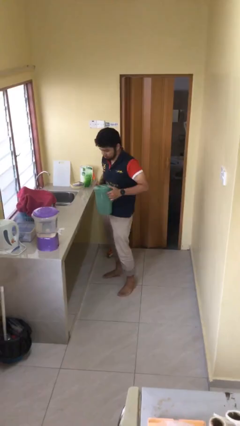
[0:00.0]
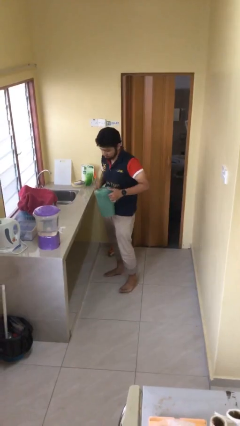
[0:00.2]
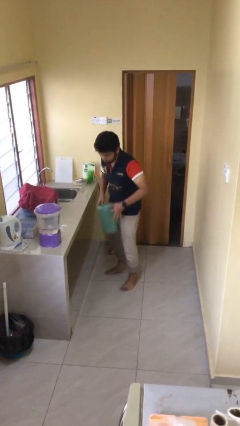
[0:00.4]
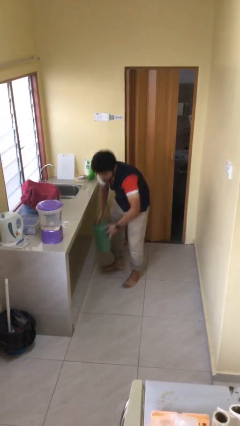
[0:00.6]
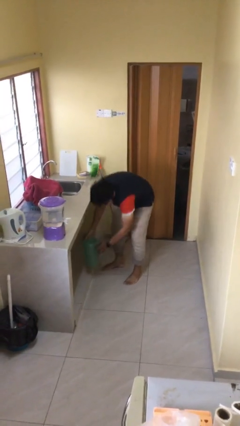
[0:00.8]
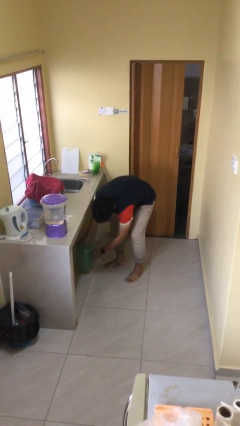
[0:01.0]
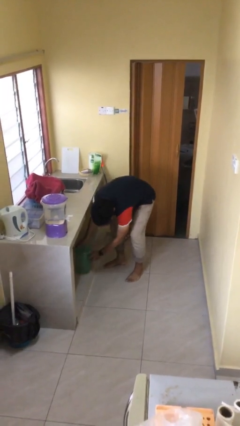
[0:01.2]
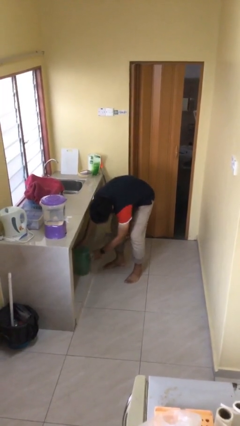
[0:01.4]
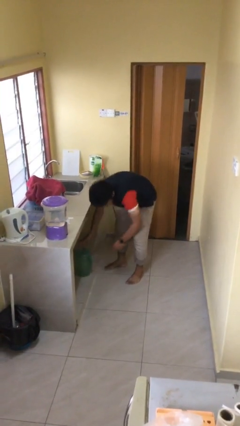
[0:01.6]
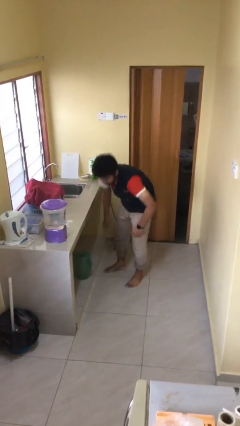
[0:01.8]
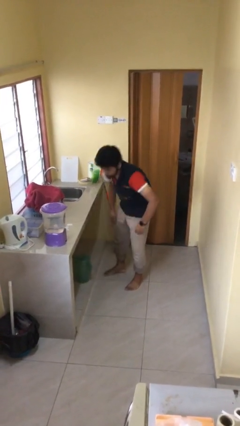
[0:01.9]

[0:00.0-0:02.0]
person puts down object into cabinet

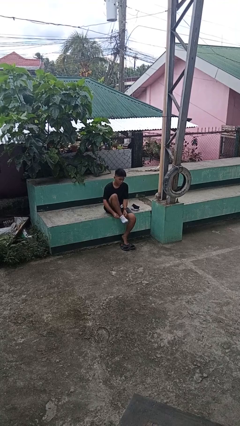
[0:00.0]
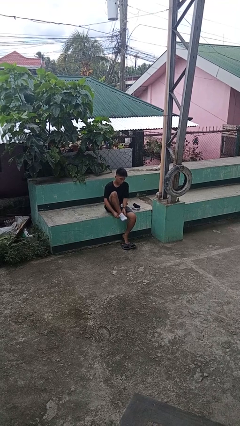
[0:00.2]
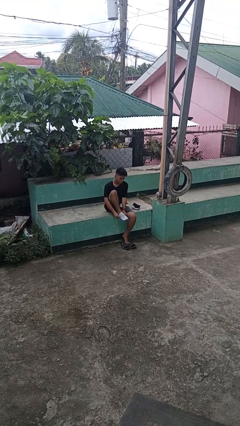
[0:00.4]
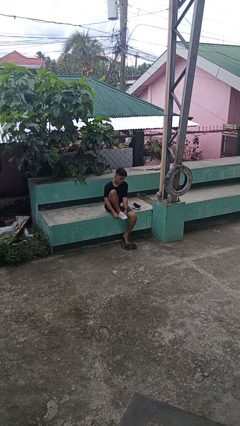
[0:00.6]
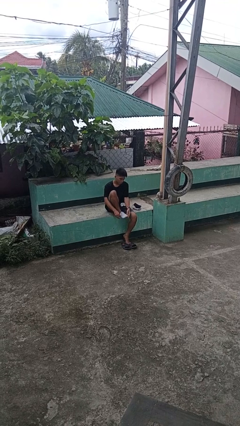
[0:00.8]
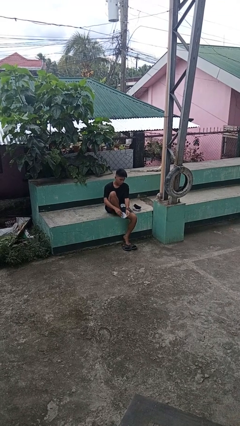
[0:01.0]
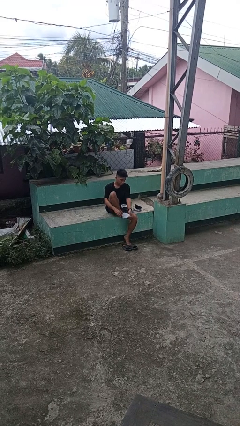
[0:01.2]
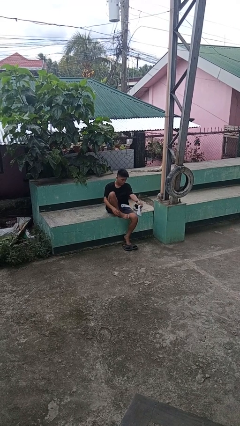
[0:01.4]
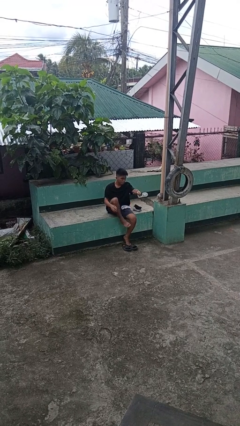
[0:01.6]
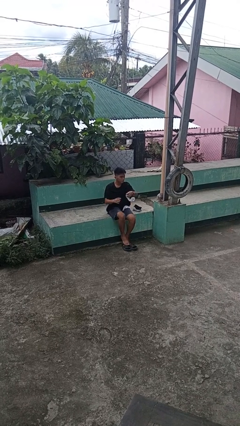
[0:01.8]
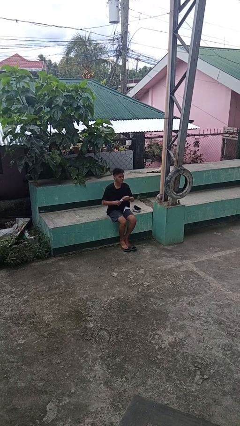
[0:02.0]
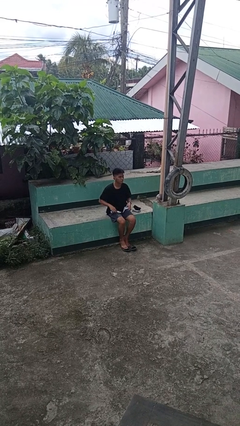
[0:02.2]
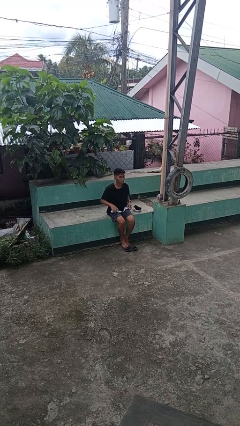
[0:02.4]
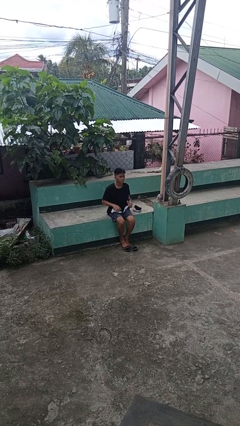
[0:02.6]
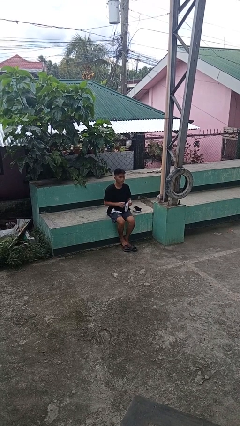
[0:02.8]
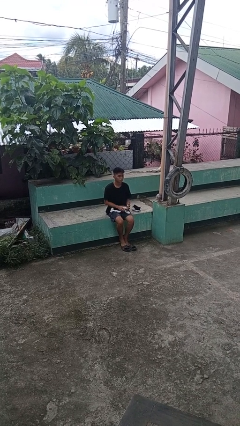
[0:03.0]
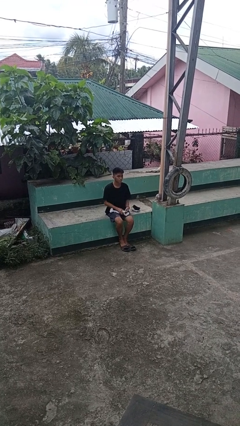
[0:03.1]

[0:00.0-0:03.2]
person takes off socks

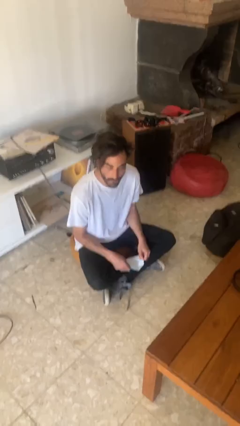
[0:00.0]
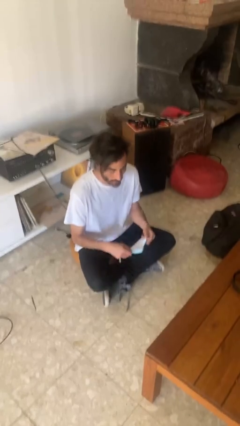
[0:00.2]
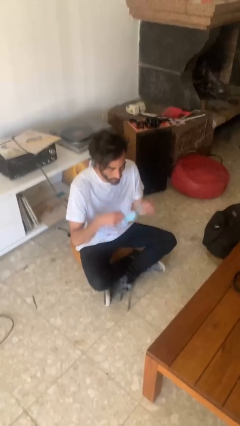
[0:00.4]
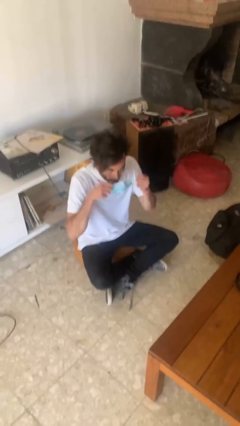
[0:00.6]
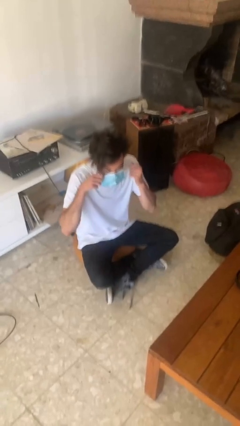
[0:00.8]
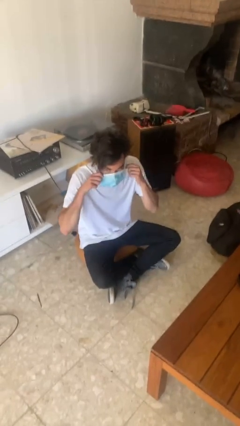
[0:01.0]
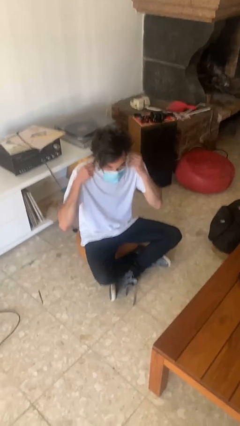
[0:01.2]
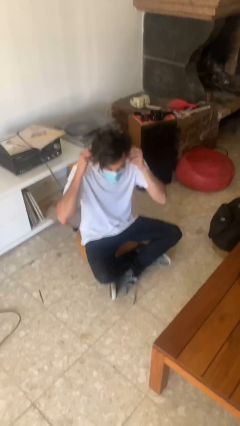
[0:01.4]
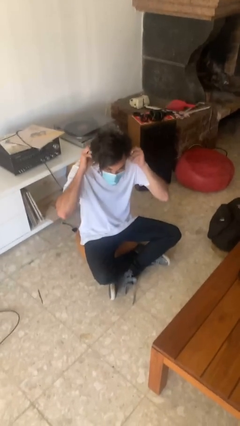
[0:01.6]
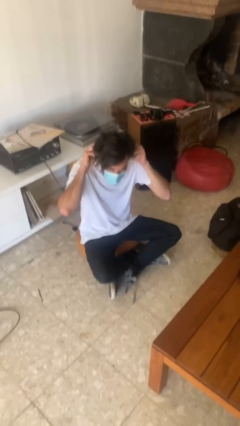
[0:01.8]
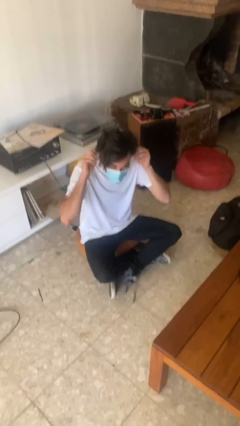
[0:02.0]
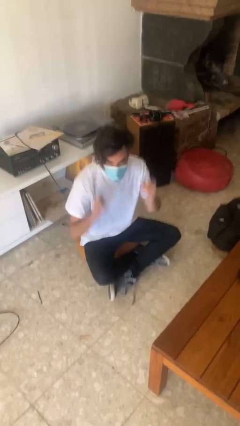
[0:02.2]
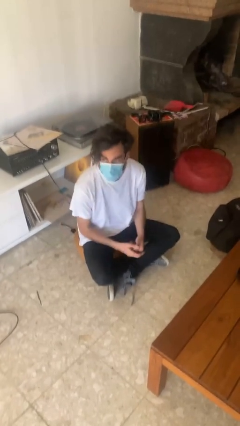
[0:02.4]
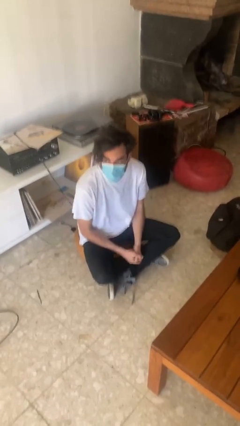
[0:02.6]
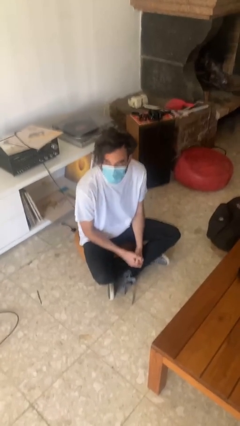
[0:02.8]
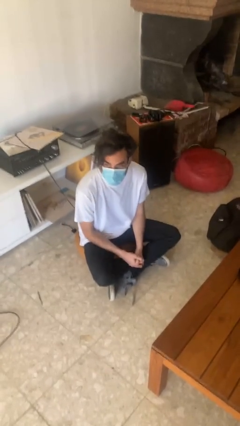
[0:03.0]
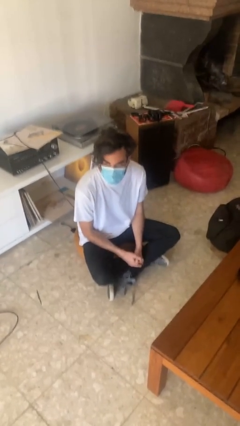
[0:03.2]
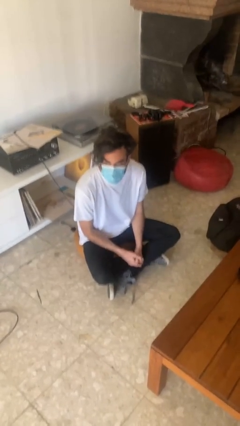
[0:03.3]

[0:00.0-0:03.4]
person puts on facemask

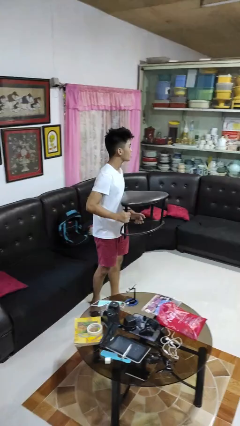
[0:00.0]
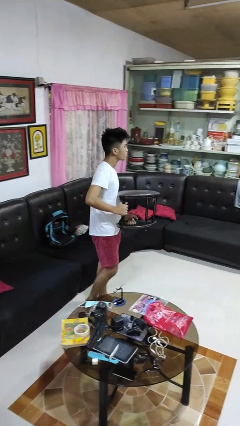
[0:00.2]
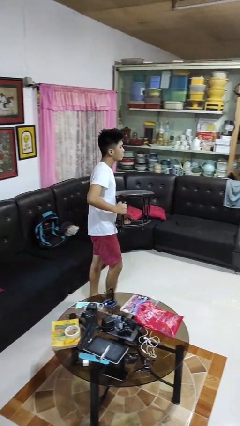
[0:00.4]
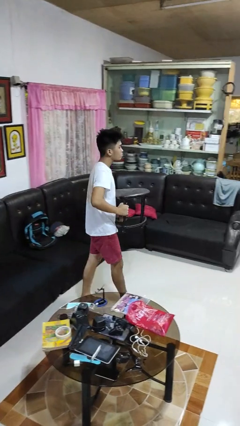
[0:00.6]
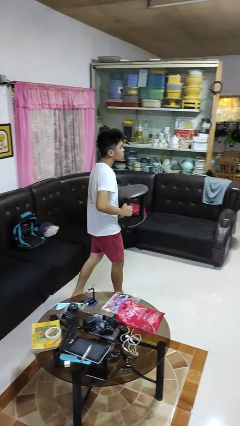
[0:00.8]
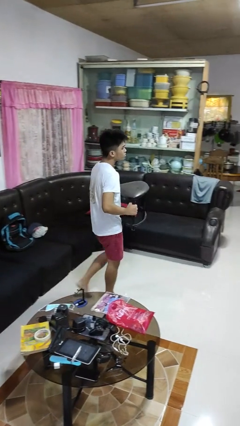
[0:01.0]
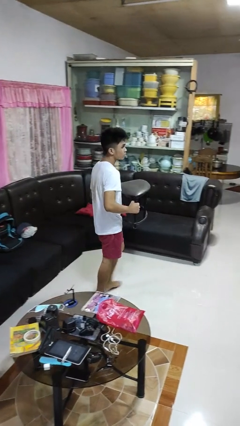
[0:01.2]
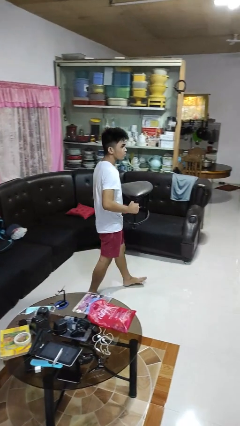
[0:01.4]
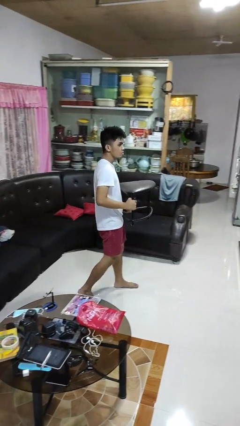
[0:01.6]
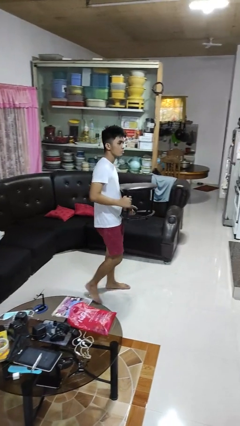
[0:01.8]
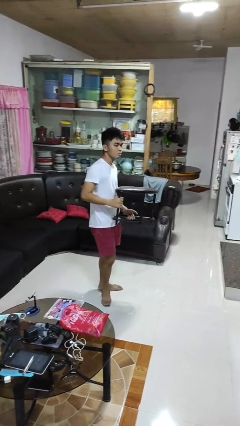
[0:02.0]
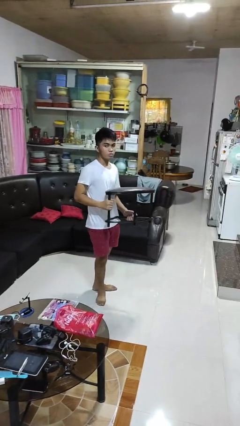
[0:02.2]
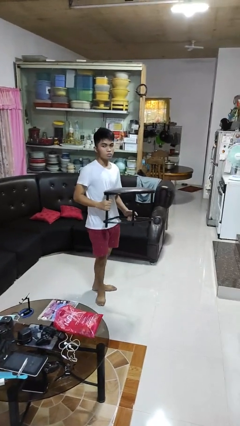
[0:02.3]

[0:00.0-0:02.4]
person carries furniture

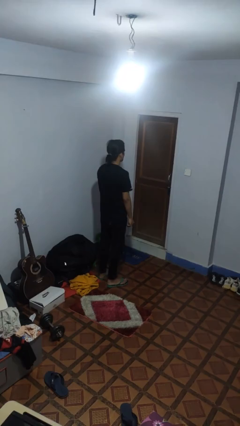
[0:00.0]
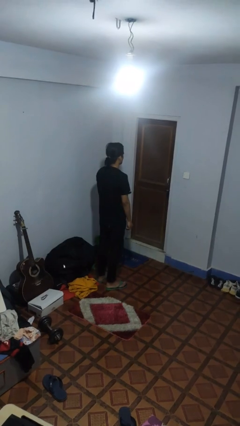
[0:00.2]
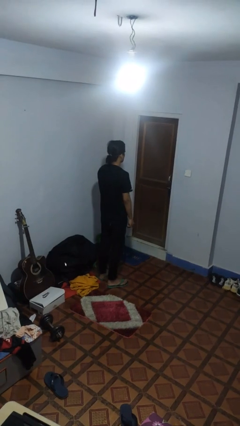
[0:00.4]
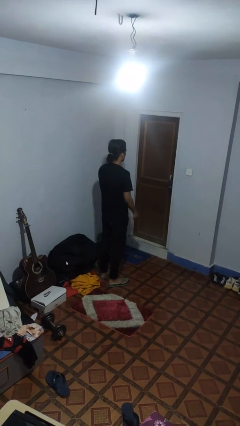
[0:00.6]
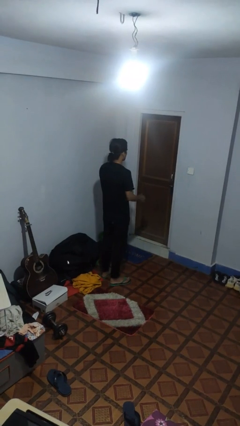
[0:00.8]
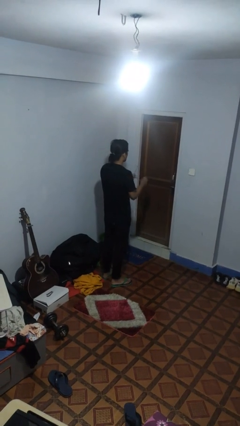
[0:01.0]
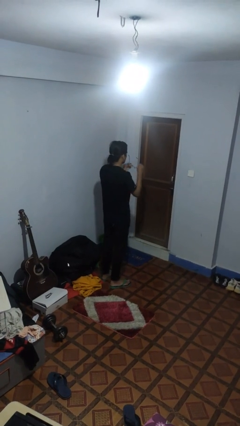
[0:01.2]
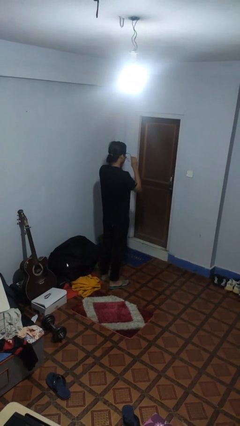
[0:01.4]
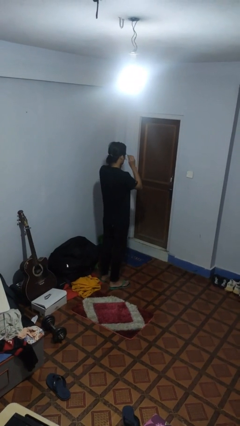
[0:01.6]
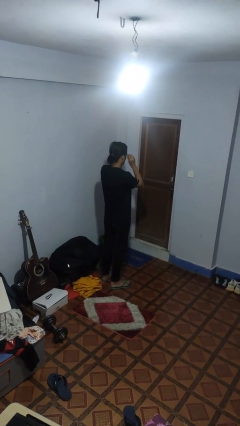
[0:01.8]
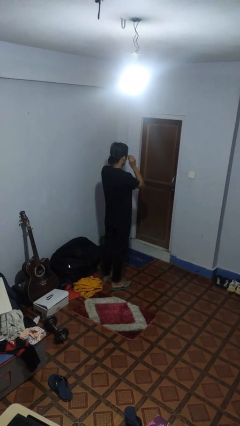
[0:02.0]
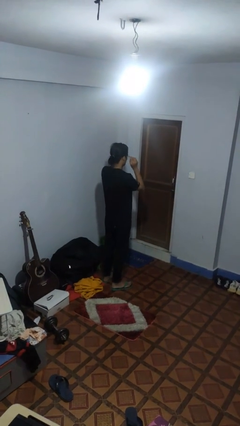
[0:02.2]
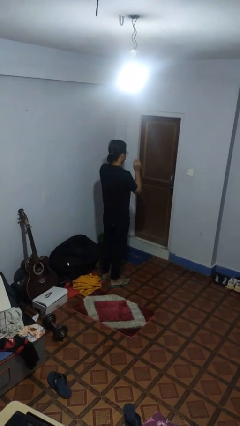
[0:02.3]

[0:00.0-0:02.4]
person puts on glasses

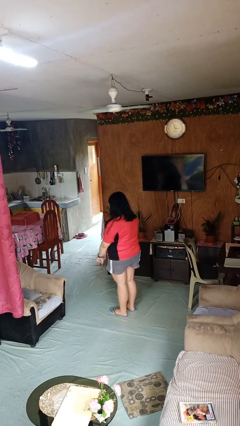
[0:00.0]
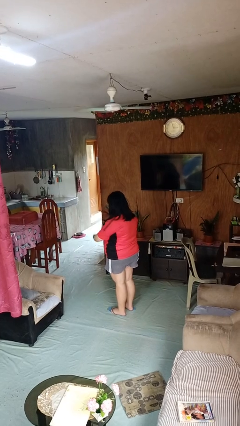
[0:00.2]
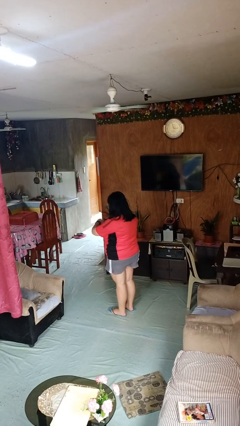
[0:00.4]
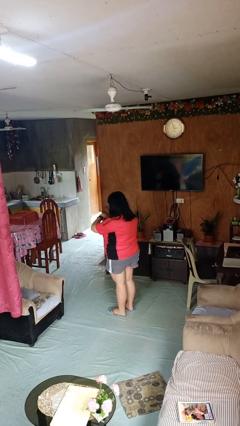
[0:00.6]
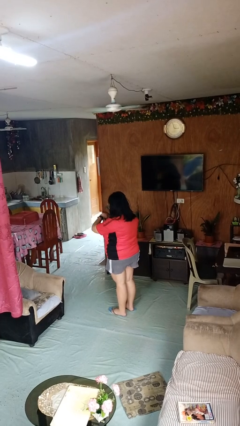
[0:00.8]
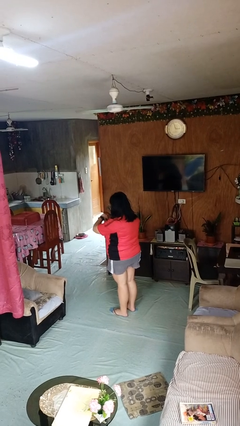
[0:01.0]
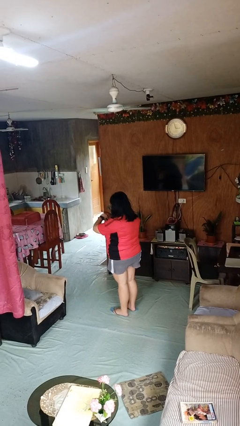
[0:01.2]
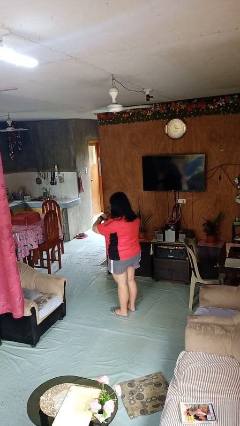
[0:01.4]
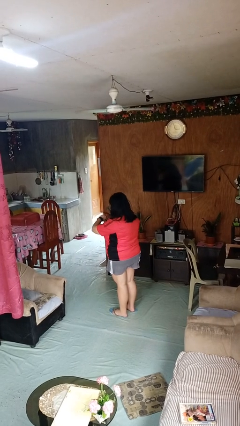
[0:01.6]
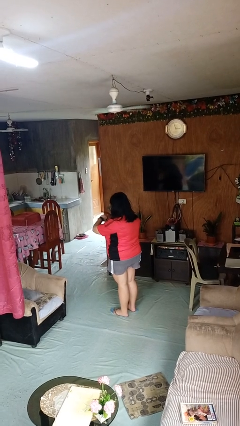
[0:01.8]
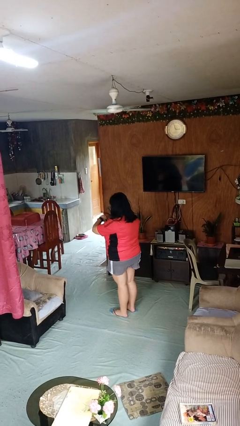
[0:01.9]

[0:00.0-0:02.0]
person looks at wristwatch

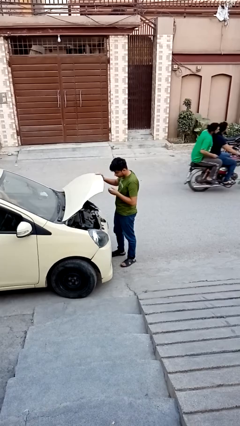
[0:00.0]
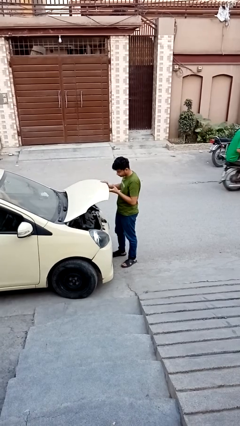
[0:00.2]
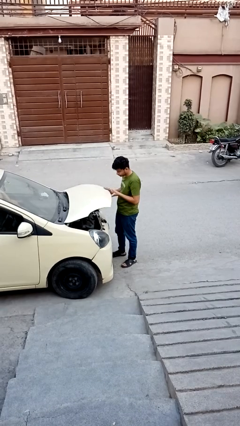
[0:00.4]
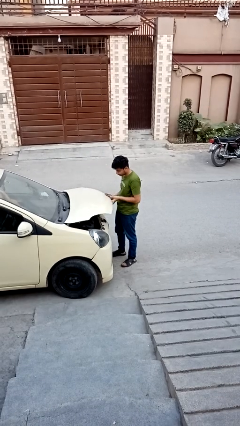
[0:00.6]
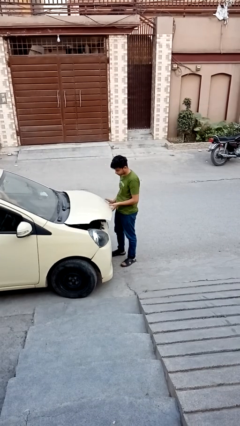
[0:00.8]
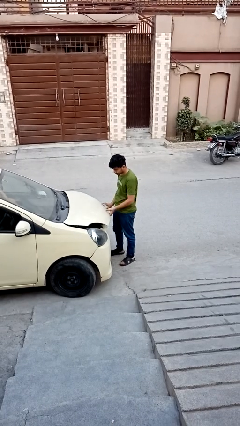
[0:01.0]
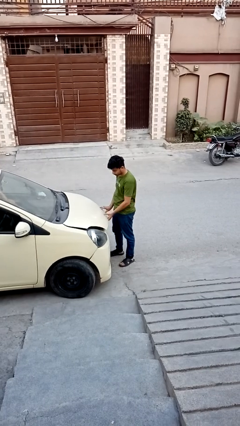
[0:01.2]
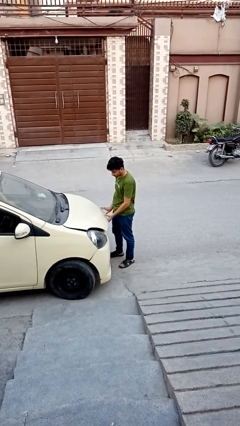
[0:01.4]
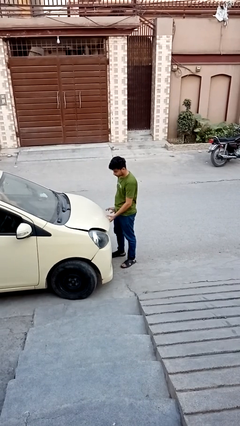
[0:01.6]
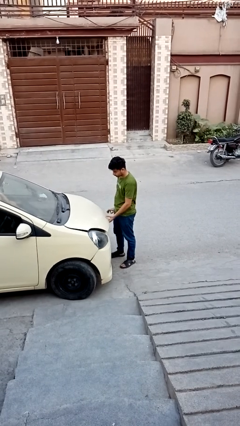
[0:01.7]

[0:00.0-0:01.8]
person closes car hood
